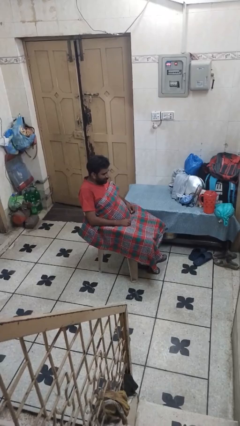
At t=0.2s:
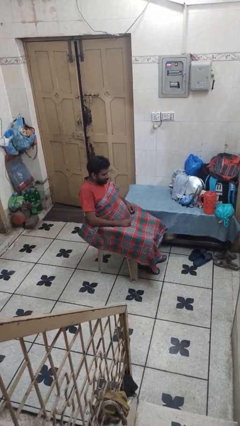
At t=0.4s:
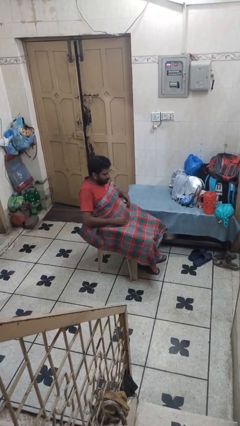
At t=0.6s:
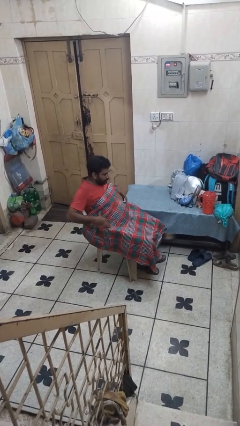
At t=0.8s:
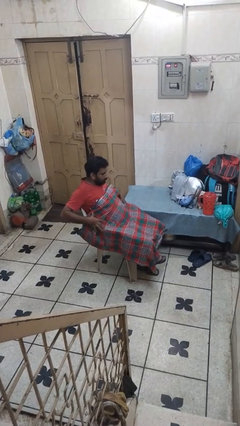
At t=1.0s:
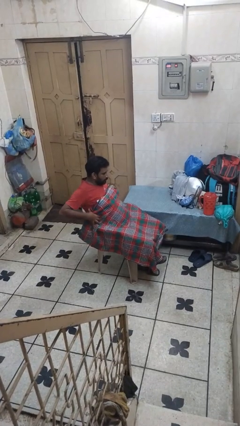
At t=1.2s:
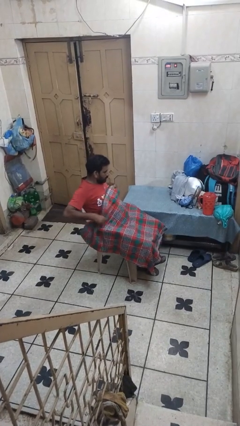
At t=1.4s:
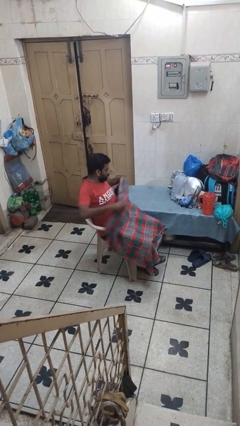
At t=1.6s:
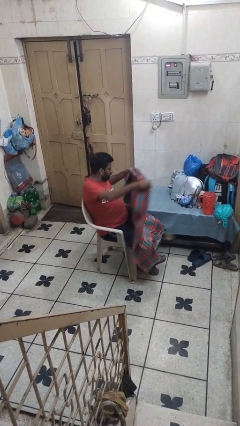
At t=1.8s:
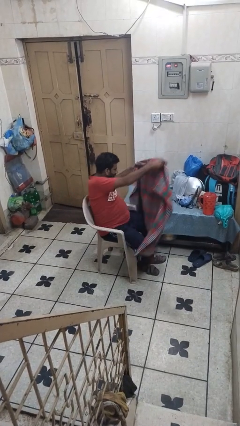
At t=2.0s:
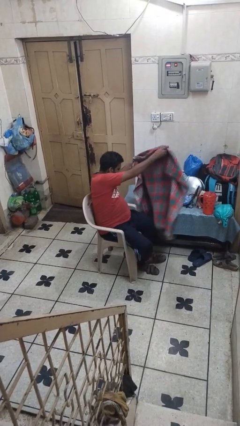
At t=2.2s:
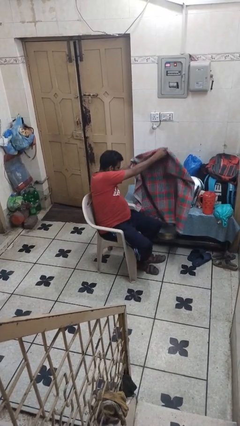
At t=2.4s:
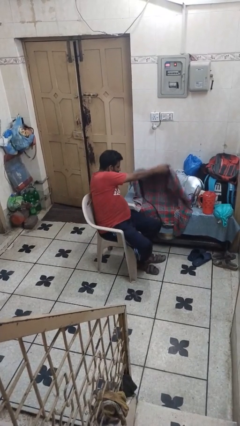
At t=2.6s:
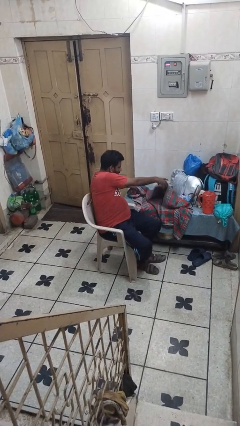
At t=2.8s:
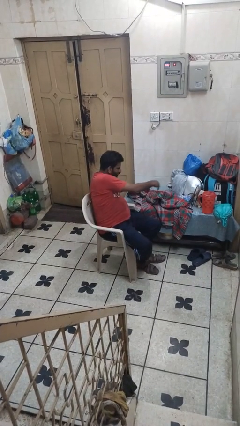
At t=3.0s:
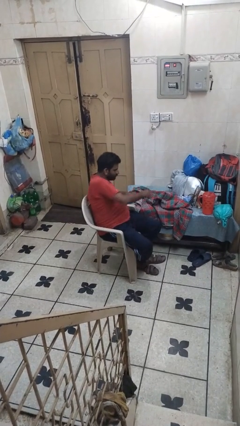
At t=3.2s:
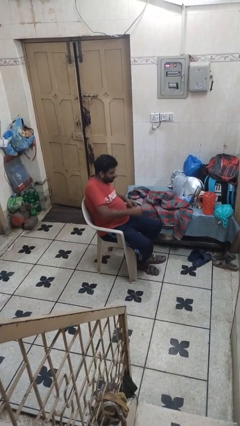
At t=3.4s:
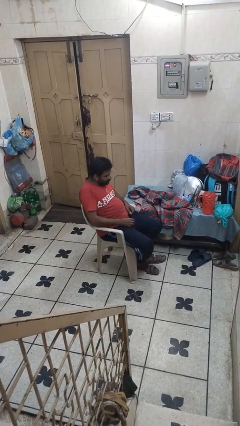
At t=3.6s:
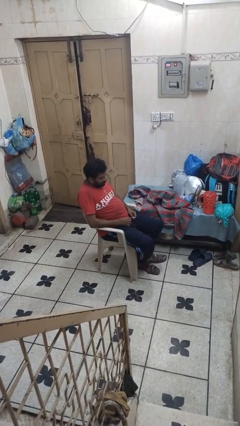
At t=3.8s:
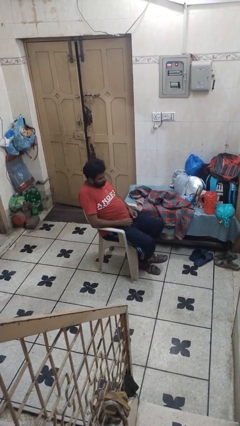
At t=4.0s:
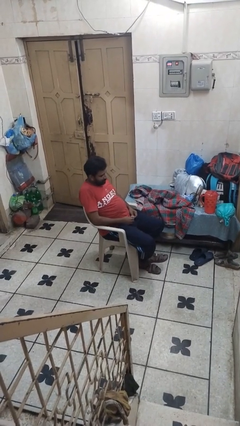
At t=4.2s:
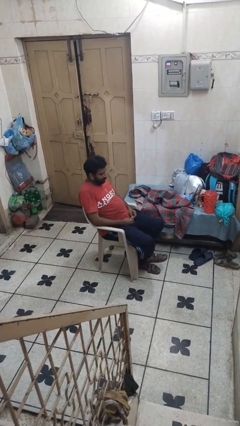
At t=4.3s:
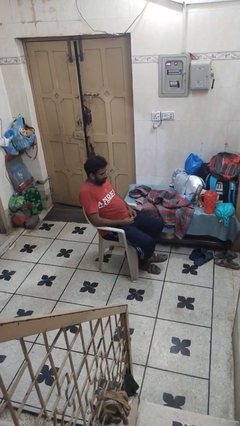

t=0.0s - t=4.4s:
person uncovers with blanket

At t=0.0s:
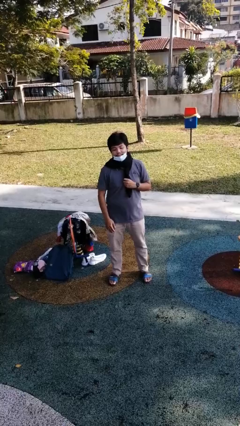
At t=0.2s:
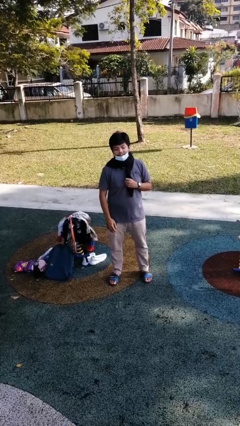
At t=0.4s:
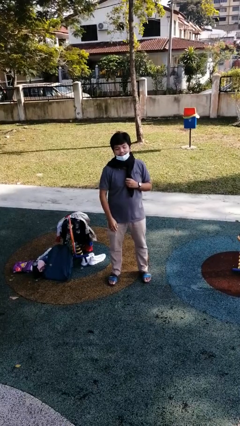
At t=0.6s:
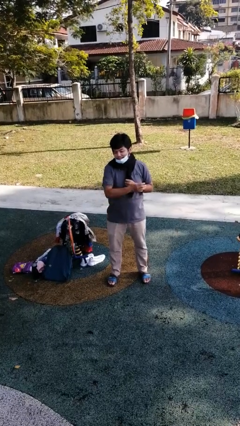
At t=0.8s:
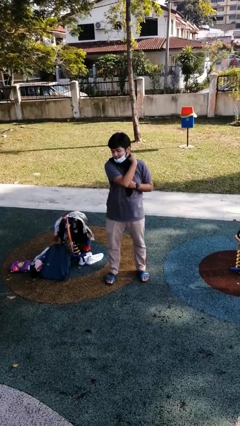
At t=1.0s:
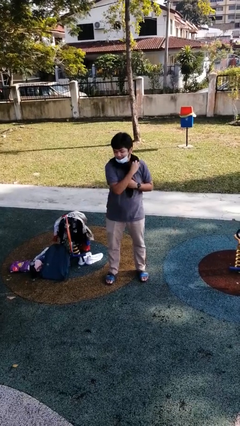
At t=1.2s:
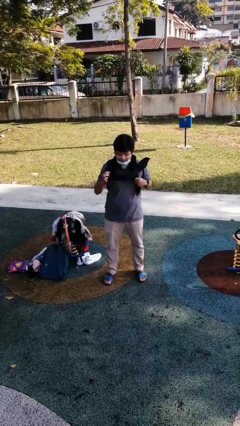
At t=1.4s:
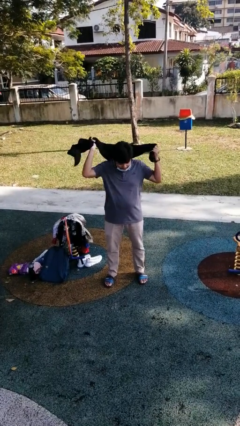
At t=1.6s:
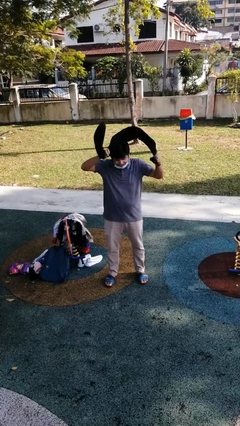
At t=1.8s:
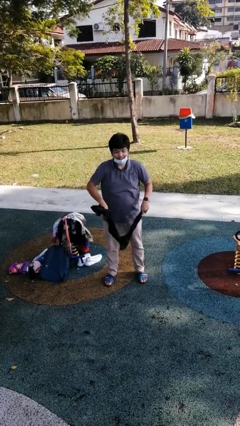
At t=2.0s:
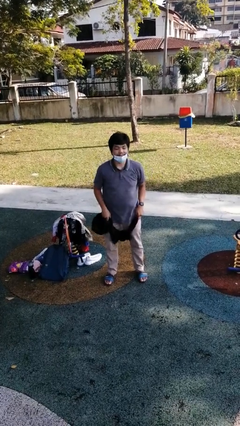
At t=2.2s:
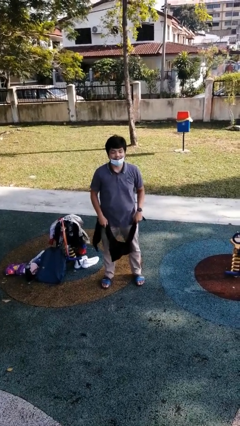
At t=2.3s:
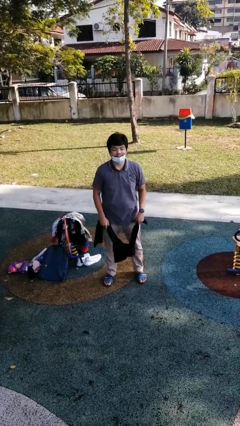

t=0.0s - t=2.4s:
person takes off scarf

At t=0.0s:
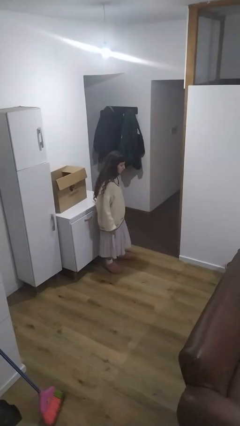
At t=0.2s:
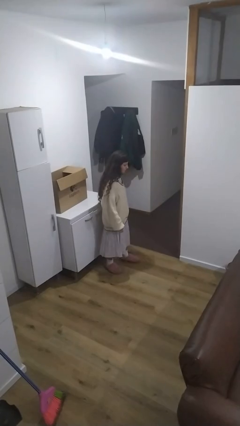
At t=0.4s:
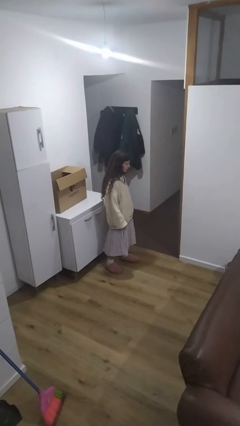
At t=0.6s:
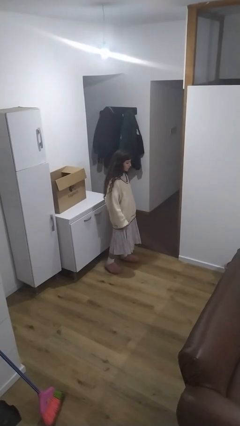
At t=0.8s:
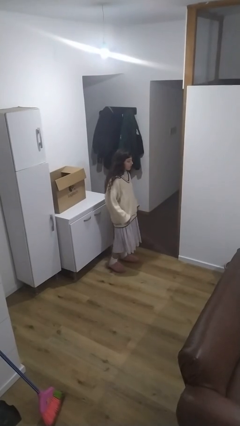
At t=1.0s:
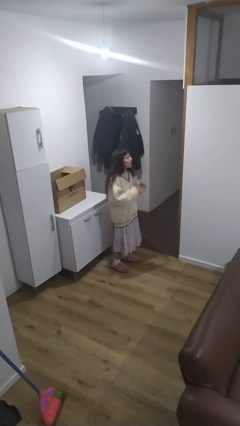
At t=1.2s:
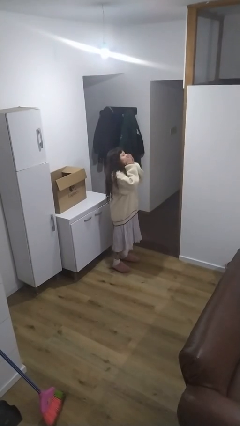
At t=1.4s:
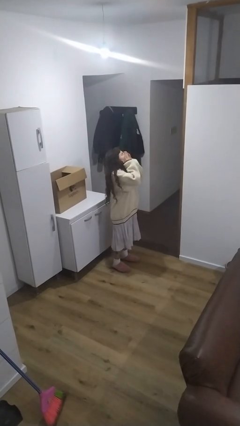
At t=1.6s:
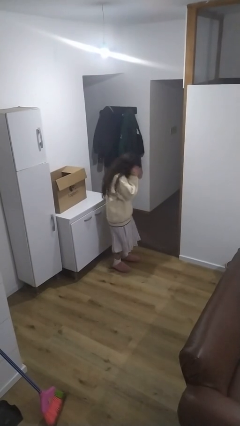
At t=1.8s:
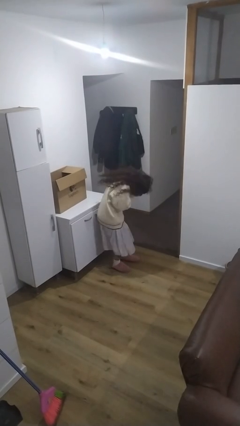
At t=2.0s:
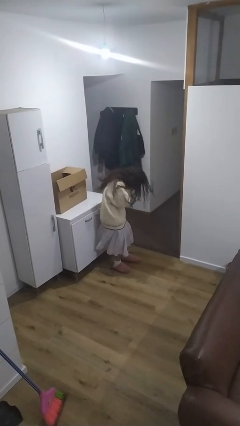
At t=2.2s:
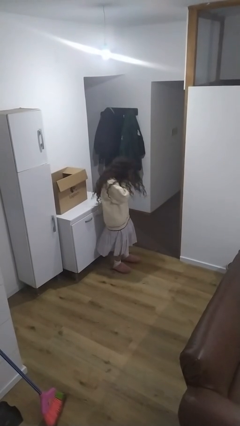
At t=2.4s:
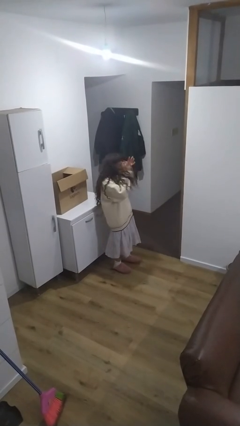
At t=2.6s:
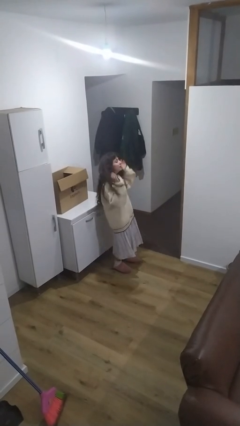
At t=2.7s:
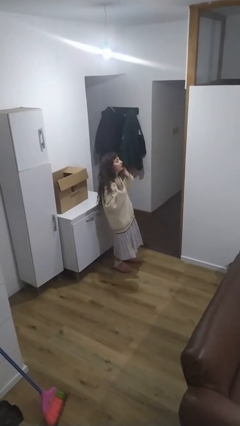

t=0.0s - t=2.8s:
person sneezes into hand

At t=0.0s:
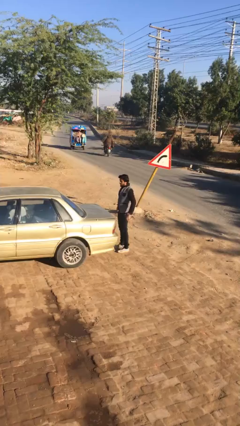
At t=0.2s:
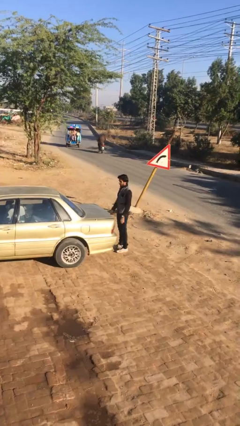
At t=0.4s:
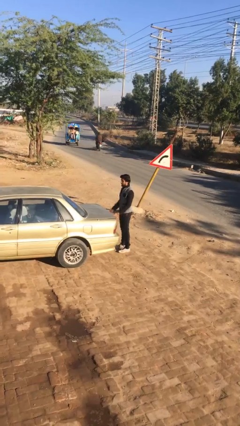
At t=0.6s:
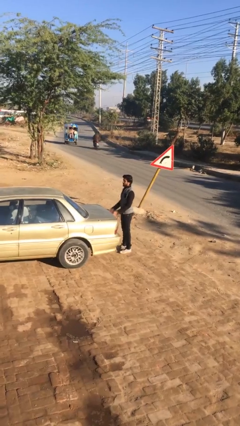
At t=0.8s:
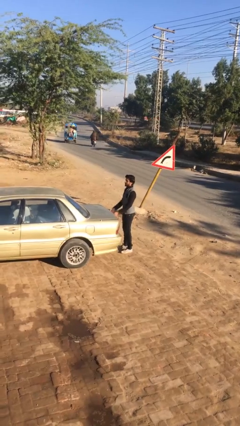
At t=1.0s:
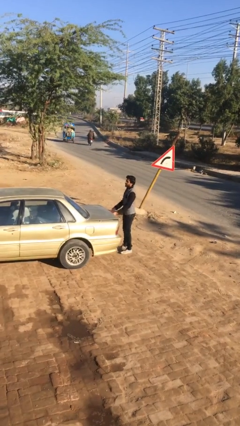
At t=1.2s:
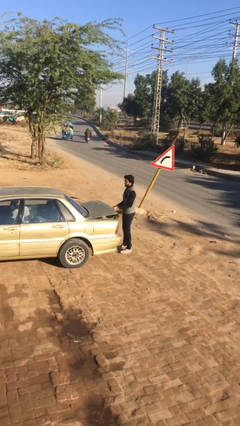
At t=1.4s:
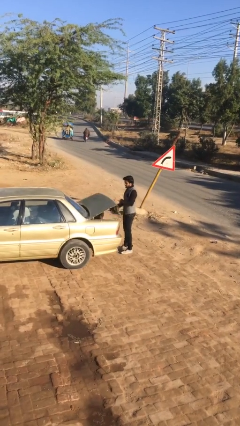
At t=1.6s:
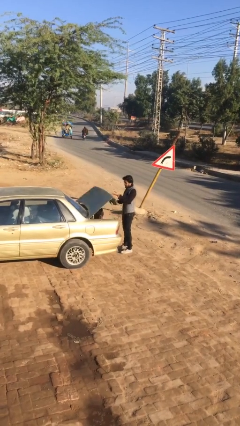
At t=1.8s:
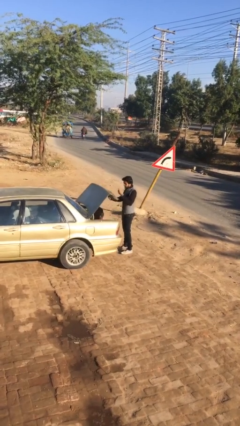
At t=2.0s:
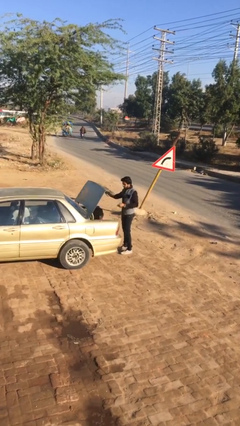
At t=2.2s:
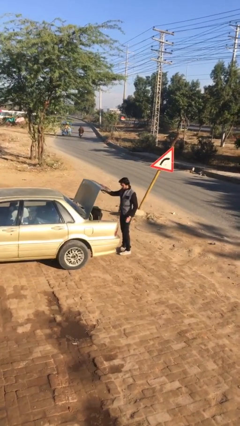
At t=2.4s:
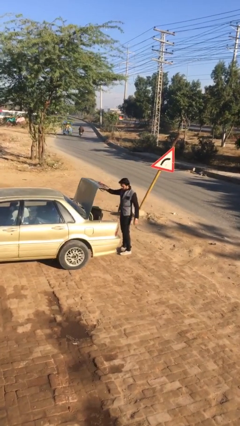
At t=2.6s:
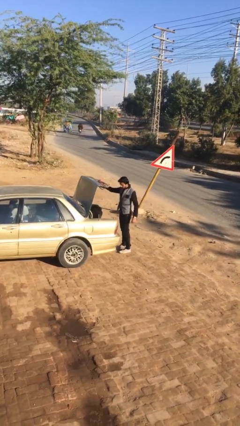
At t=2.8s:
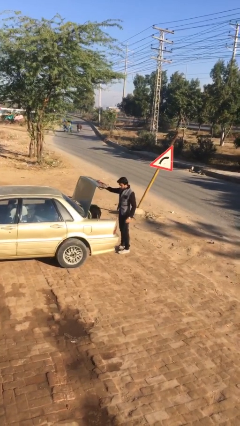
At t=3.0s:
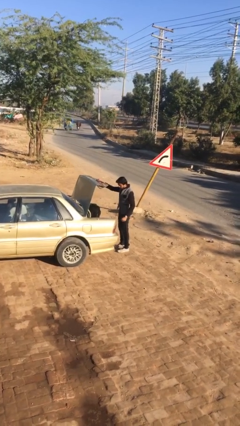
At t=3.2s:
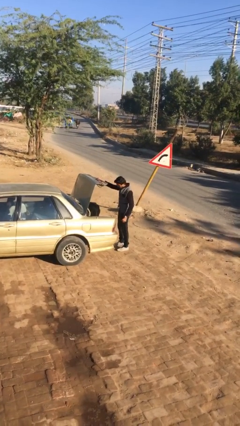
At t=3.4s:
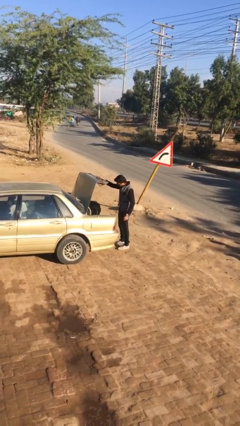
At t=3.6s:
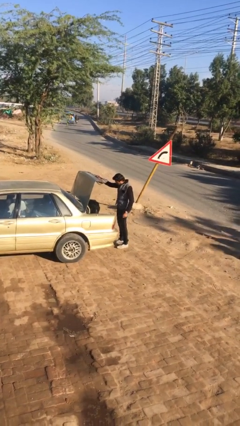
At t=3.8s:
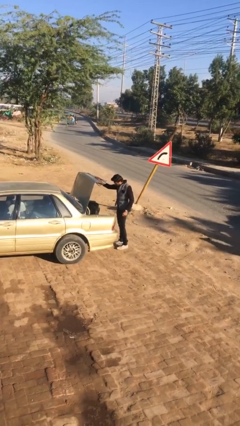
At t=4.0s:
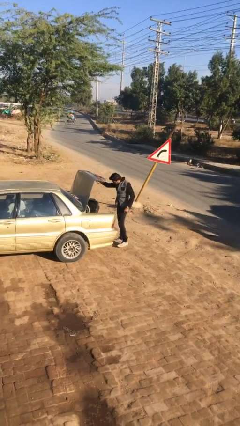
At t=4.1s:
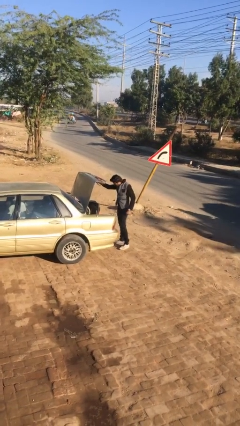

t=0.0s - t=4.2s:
person opens car trunk

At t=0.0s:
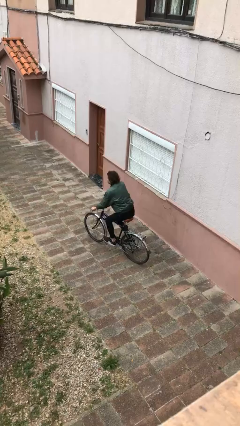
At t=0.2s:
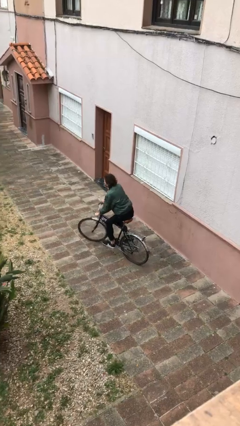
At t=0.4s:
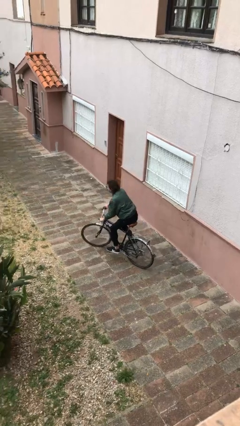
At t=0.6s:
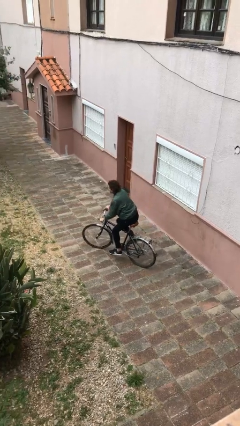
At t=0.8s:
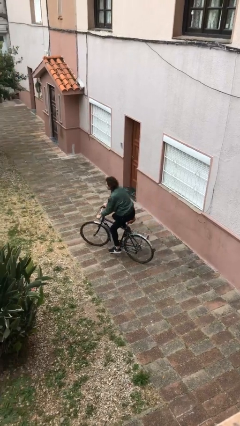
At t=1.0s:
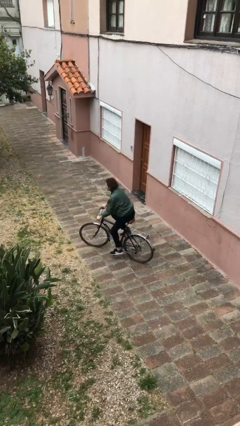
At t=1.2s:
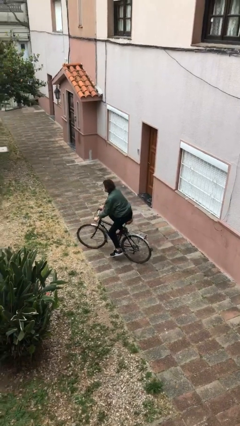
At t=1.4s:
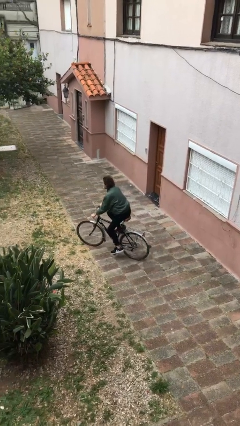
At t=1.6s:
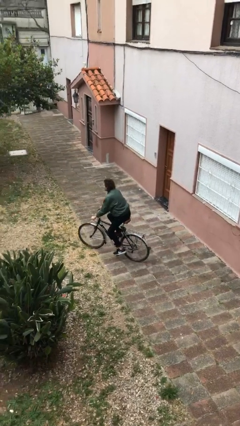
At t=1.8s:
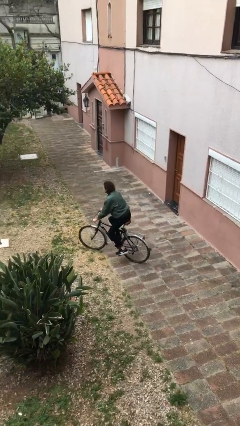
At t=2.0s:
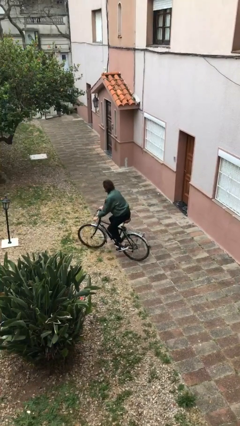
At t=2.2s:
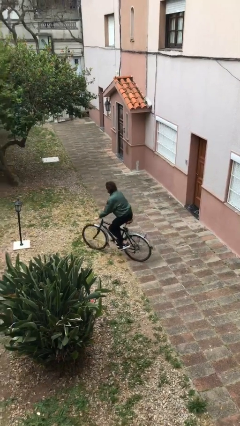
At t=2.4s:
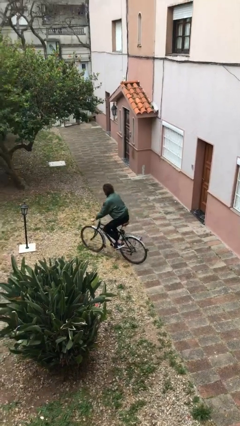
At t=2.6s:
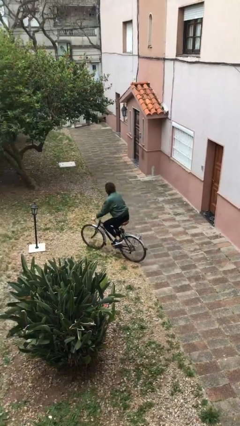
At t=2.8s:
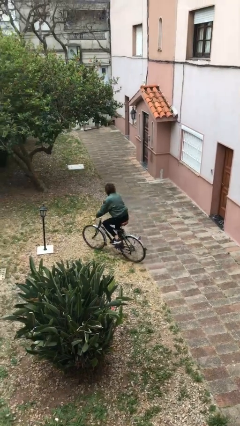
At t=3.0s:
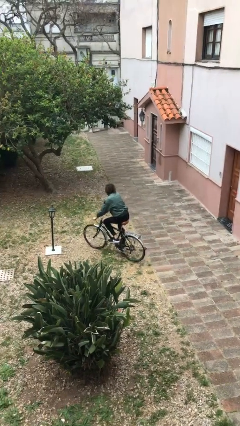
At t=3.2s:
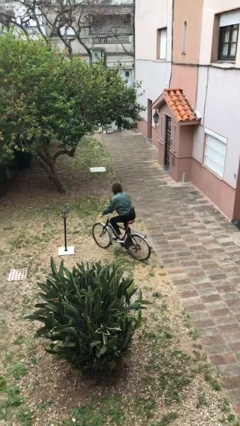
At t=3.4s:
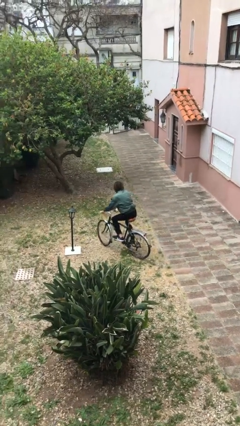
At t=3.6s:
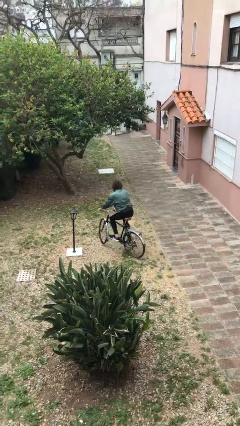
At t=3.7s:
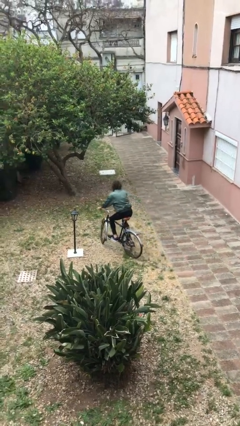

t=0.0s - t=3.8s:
person rides bicycle

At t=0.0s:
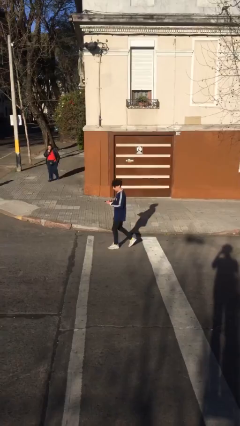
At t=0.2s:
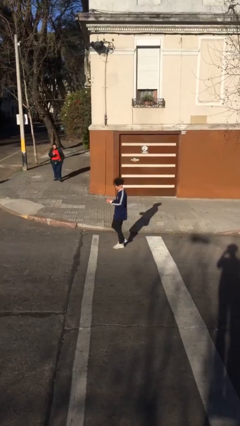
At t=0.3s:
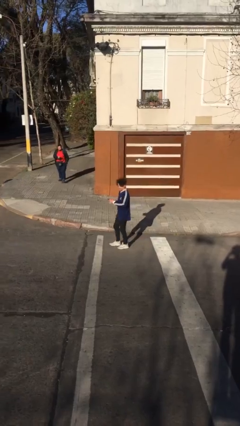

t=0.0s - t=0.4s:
person talks on phone
